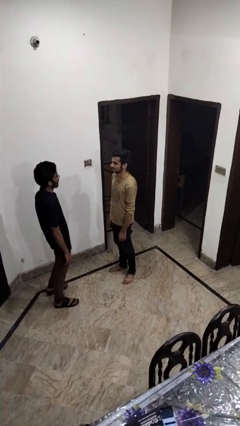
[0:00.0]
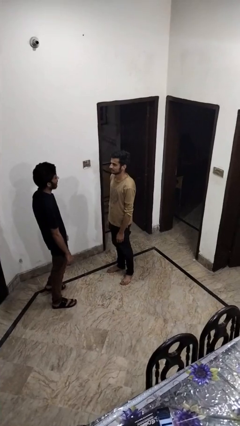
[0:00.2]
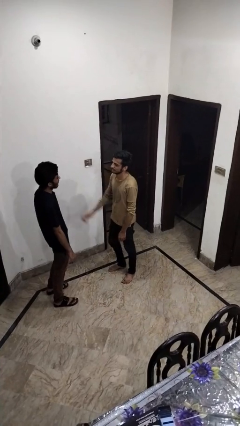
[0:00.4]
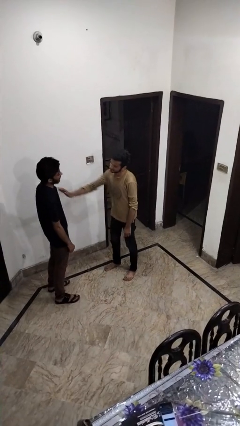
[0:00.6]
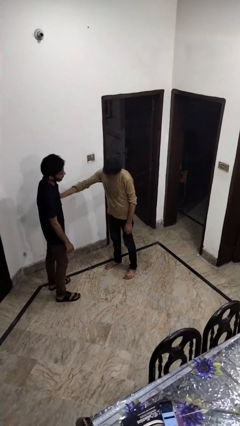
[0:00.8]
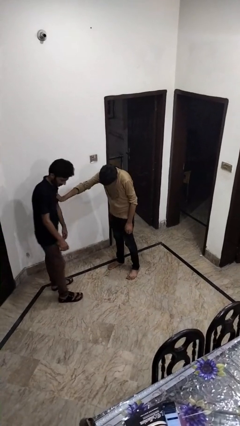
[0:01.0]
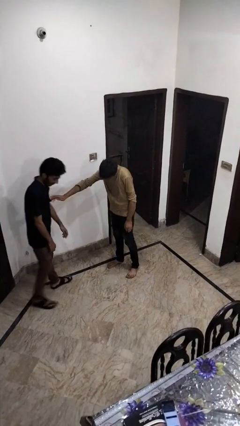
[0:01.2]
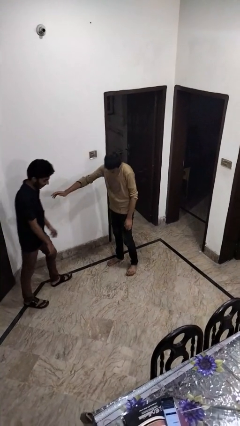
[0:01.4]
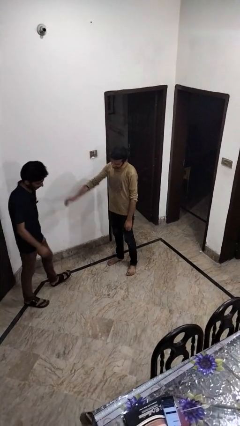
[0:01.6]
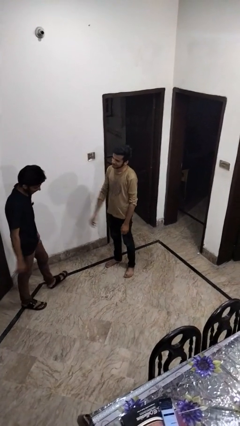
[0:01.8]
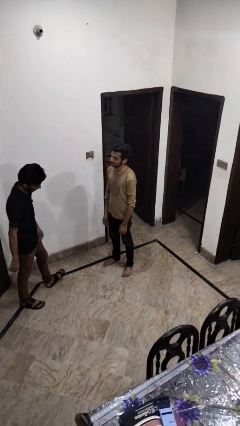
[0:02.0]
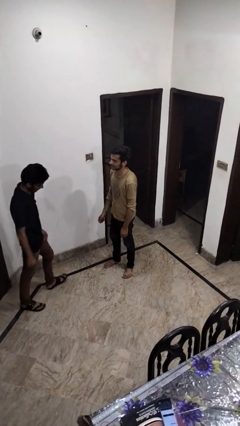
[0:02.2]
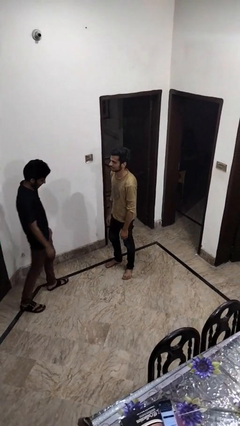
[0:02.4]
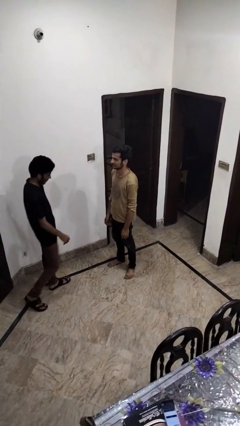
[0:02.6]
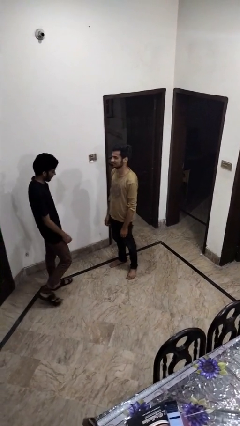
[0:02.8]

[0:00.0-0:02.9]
person shoves person

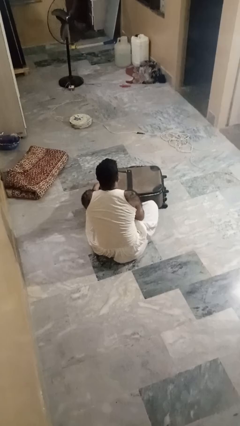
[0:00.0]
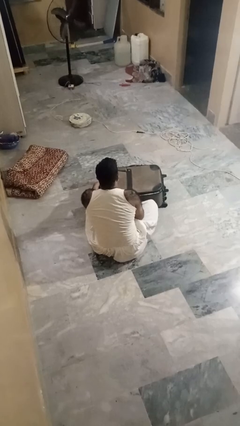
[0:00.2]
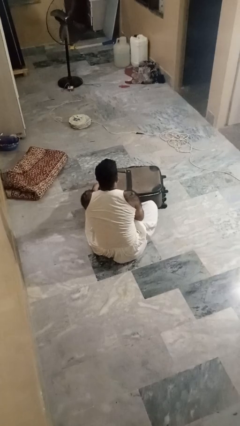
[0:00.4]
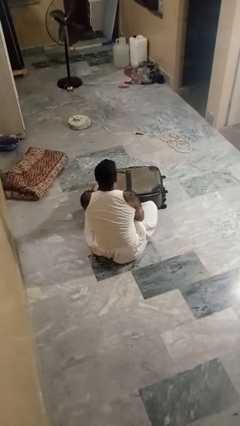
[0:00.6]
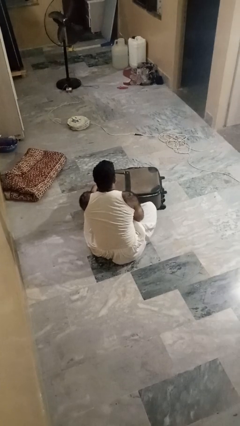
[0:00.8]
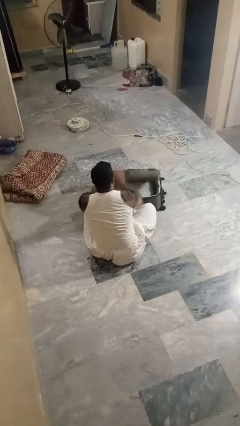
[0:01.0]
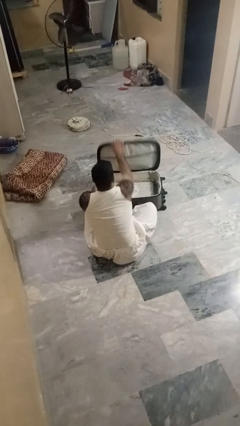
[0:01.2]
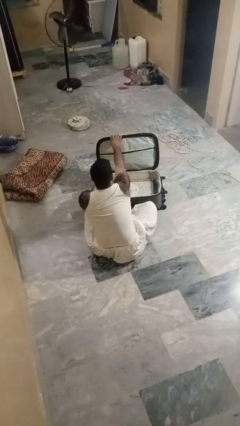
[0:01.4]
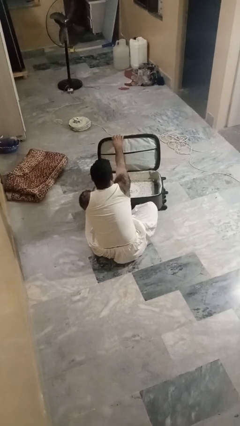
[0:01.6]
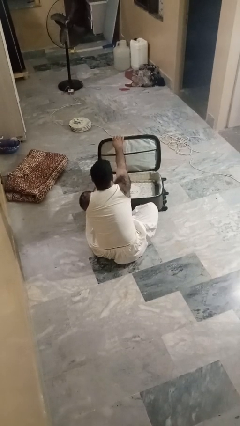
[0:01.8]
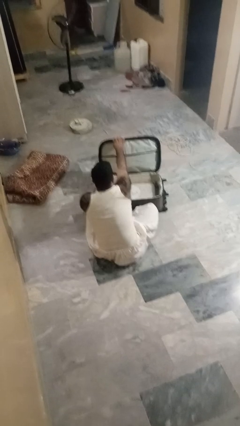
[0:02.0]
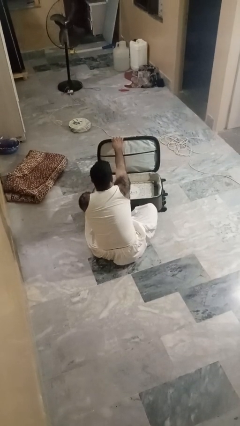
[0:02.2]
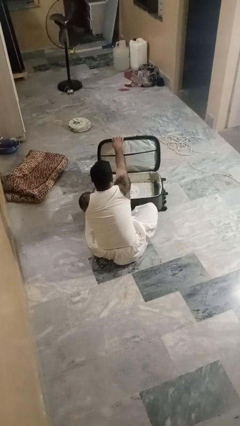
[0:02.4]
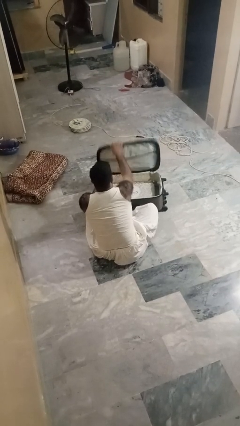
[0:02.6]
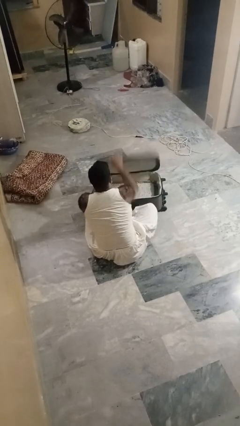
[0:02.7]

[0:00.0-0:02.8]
person opens suitcase

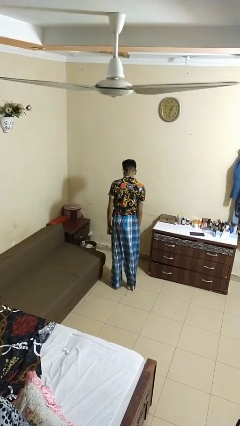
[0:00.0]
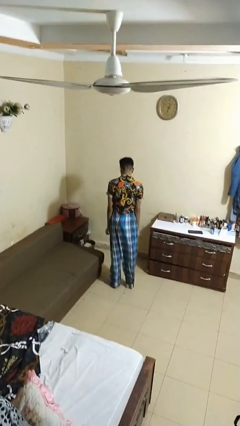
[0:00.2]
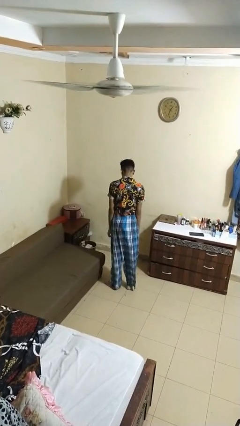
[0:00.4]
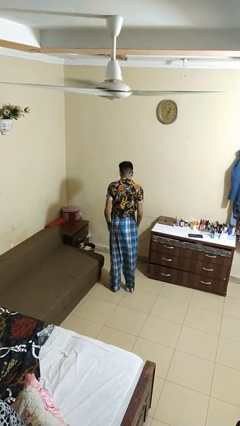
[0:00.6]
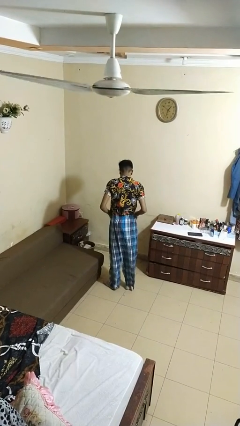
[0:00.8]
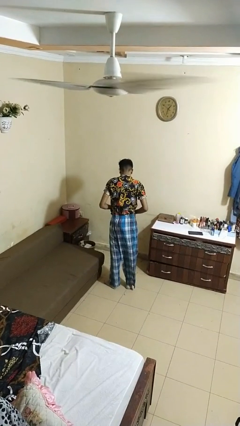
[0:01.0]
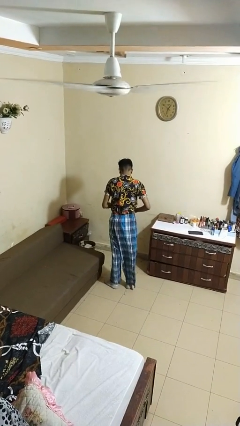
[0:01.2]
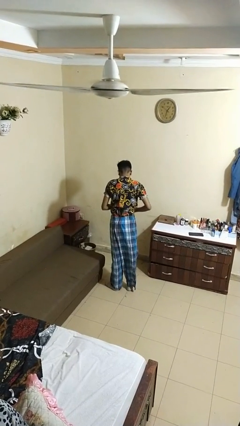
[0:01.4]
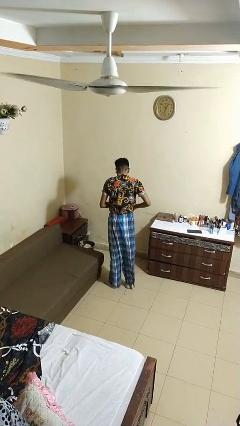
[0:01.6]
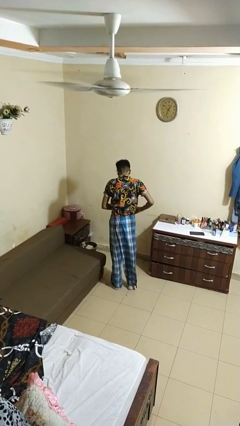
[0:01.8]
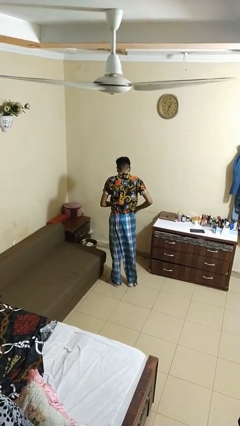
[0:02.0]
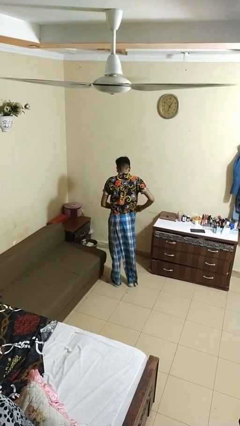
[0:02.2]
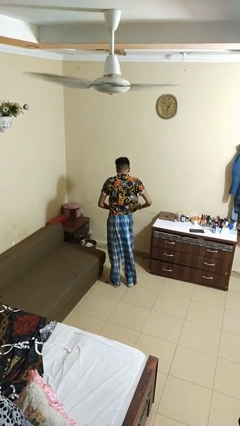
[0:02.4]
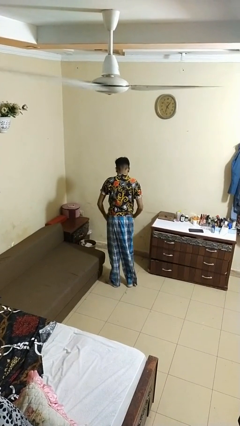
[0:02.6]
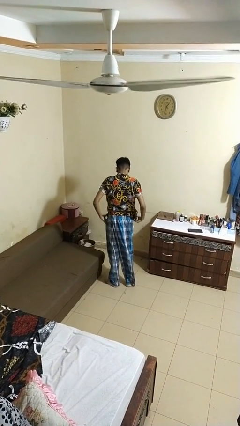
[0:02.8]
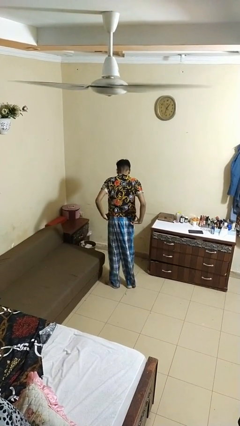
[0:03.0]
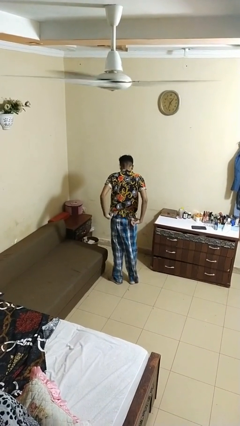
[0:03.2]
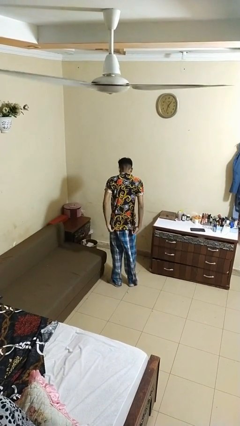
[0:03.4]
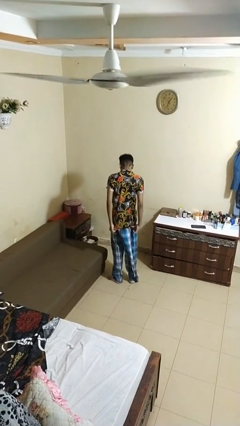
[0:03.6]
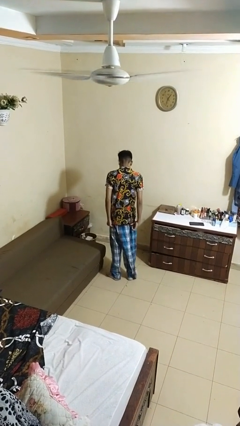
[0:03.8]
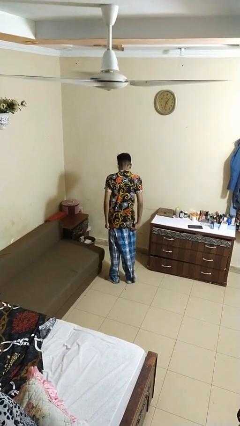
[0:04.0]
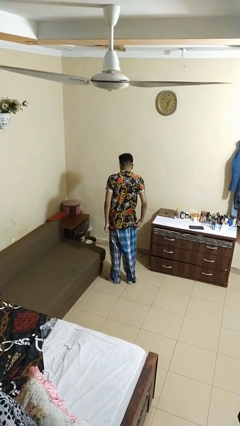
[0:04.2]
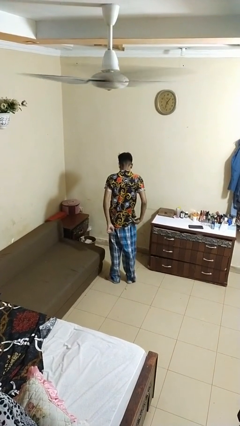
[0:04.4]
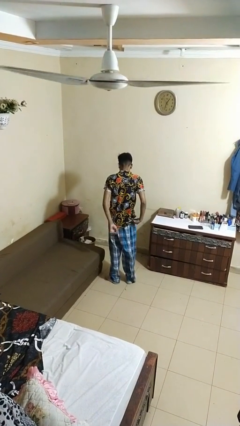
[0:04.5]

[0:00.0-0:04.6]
person untucks shirt

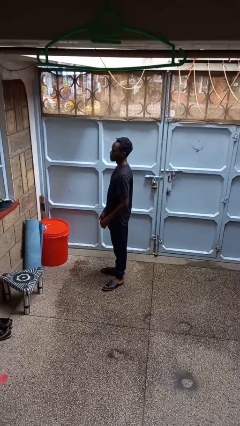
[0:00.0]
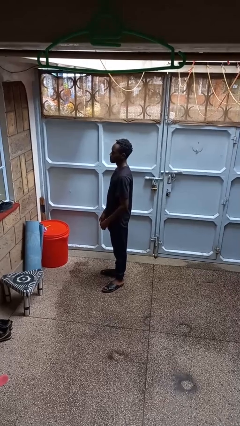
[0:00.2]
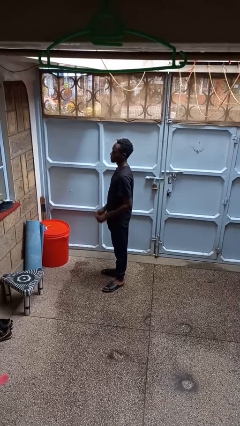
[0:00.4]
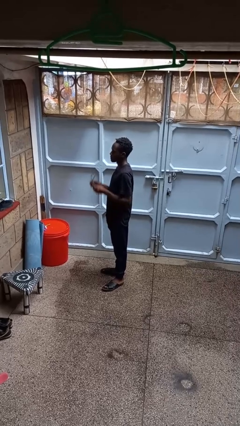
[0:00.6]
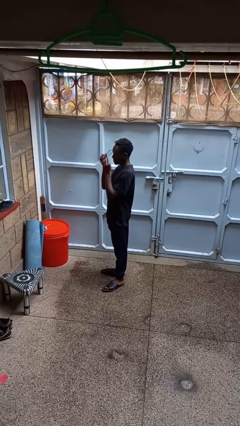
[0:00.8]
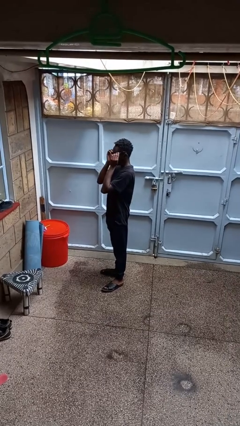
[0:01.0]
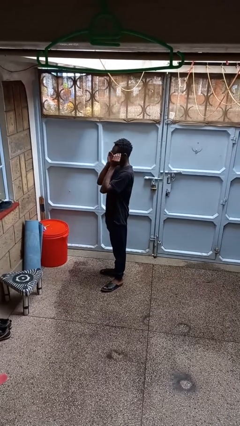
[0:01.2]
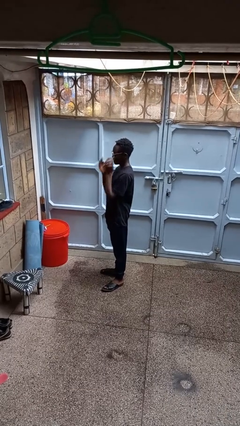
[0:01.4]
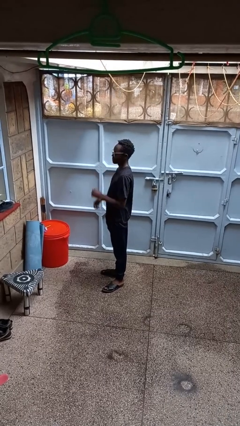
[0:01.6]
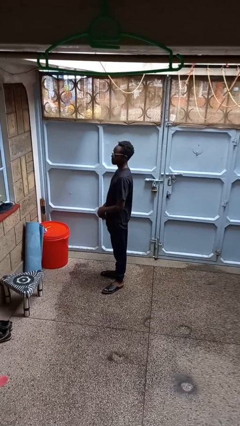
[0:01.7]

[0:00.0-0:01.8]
person puts on glasses

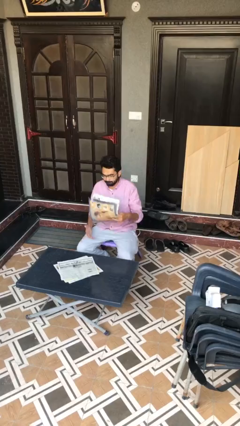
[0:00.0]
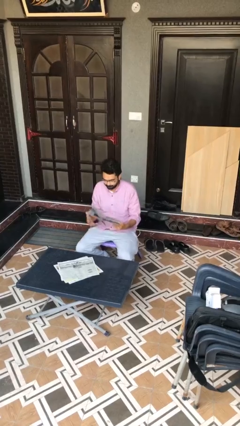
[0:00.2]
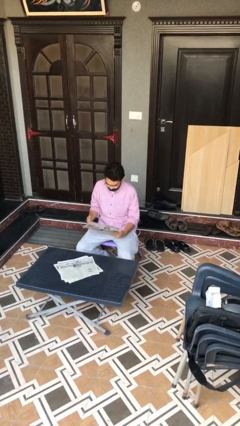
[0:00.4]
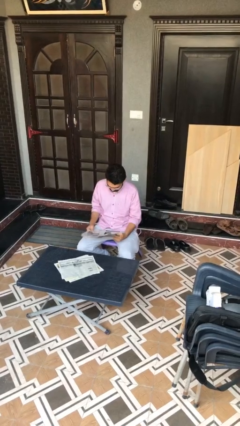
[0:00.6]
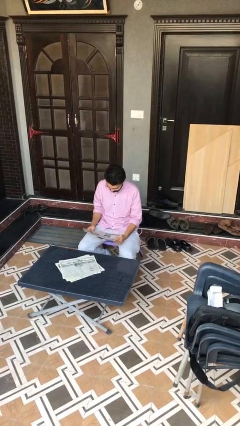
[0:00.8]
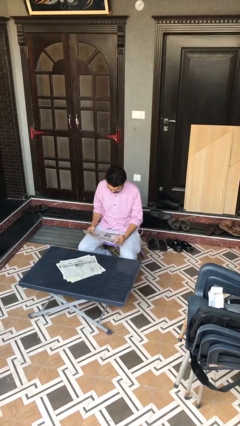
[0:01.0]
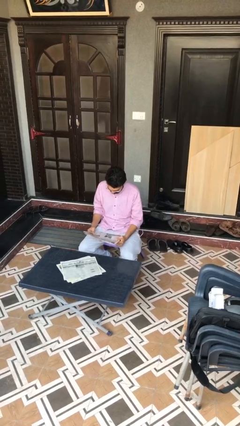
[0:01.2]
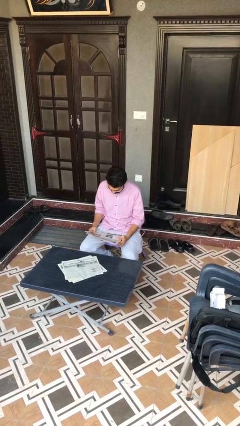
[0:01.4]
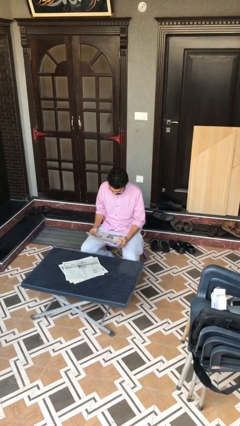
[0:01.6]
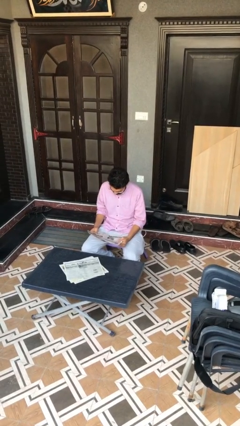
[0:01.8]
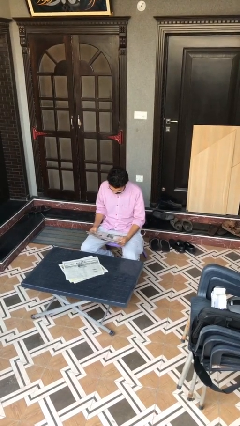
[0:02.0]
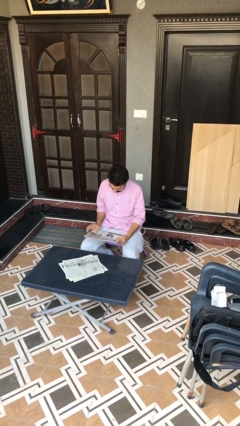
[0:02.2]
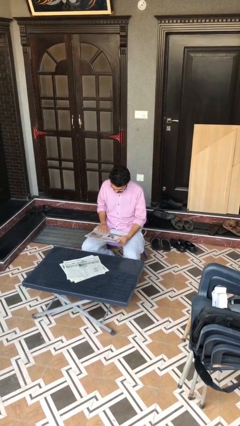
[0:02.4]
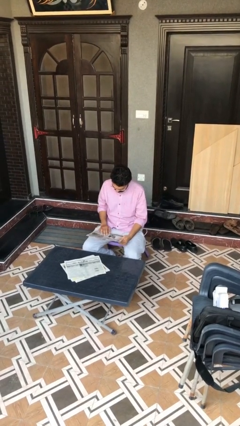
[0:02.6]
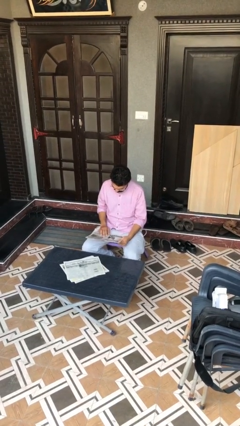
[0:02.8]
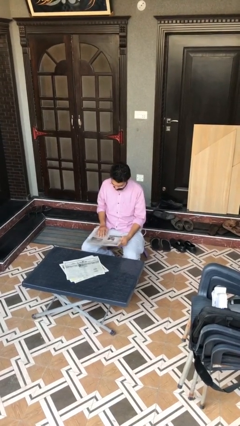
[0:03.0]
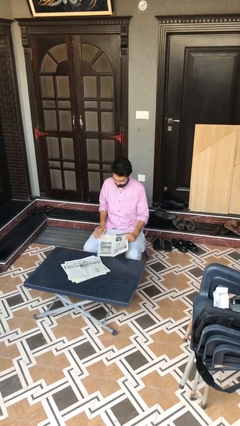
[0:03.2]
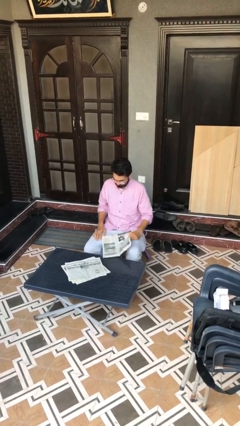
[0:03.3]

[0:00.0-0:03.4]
person reads document

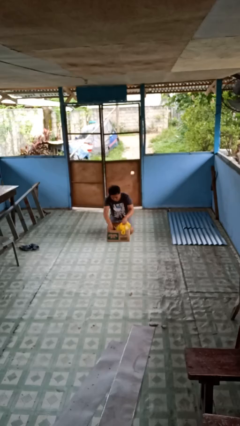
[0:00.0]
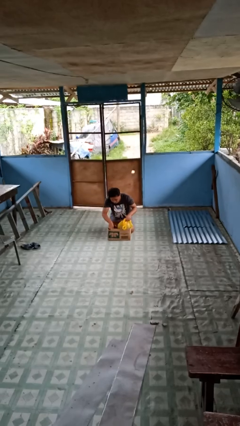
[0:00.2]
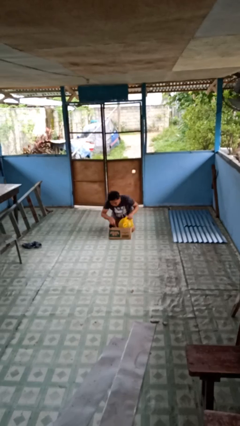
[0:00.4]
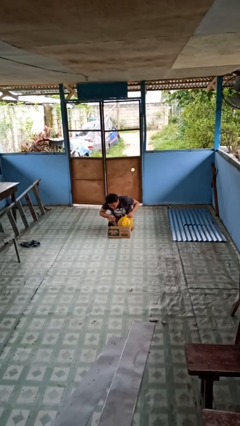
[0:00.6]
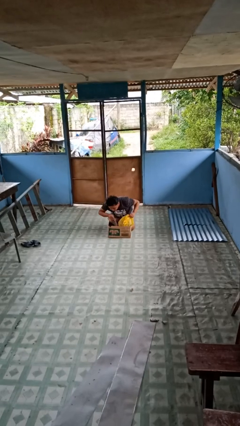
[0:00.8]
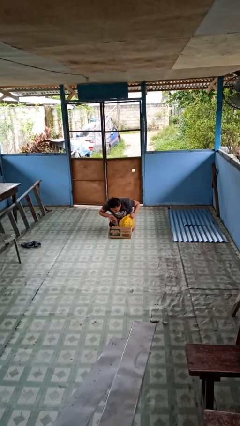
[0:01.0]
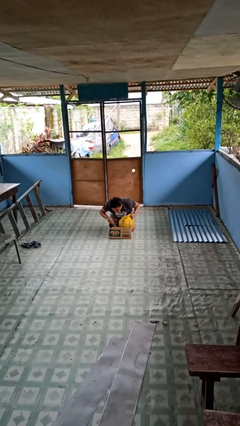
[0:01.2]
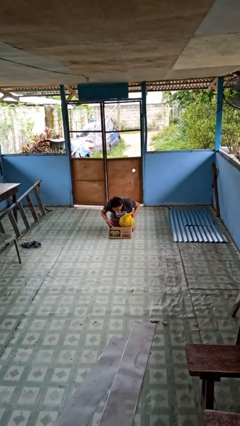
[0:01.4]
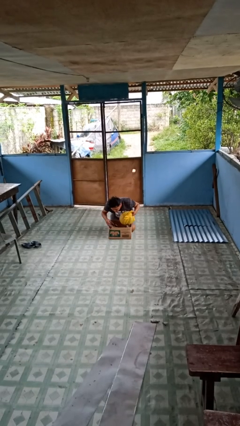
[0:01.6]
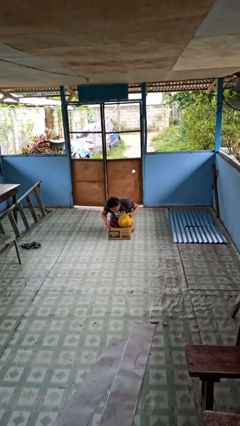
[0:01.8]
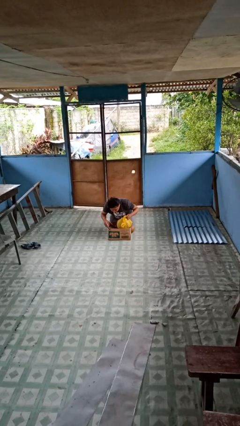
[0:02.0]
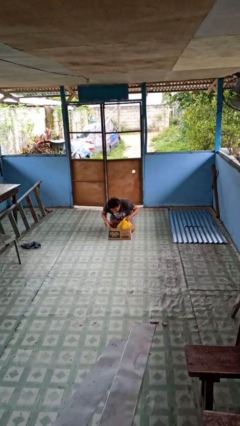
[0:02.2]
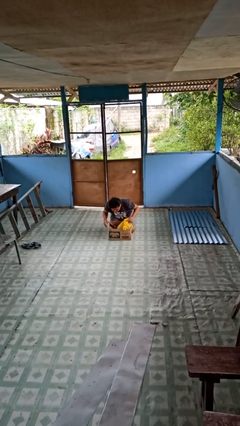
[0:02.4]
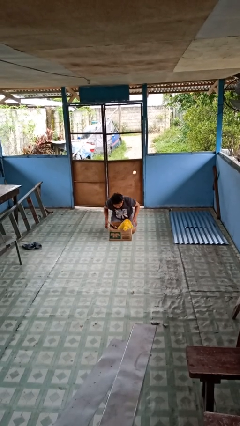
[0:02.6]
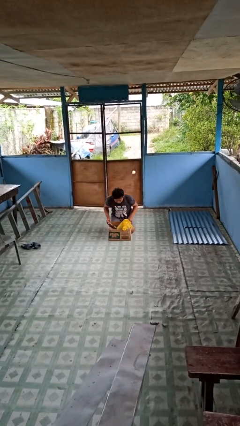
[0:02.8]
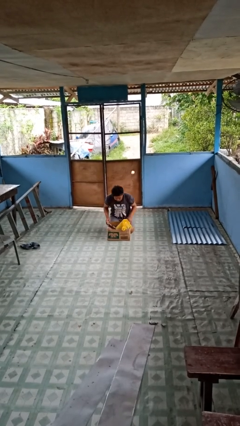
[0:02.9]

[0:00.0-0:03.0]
person searches in box
